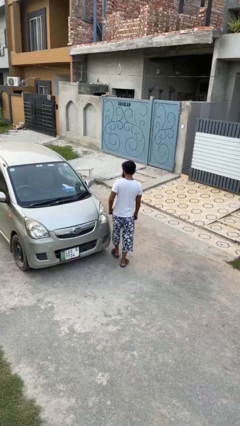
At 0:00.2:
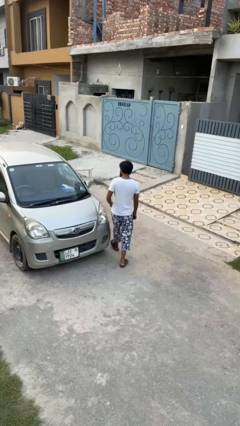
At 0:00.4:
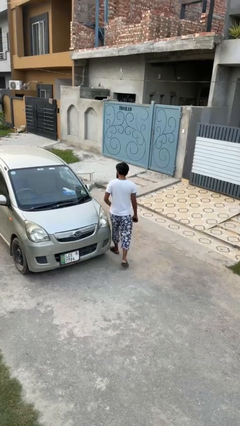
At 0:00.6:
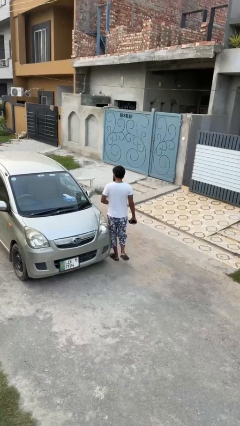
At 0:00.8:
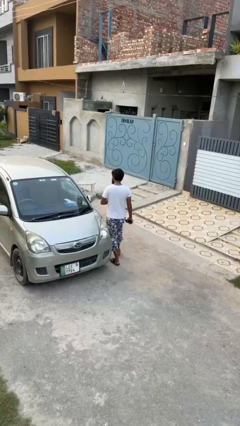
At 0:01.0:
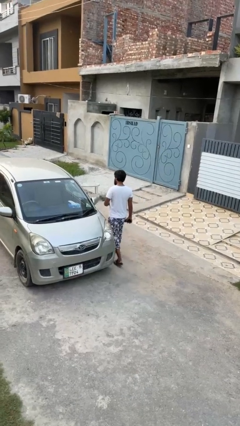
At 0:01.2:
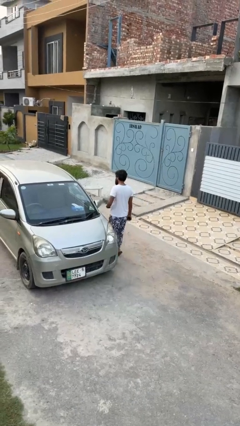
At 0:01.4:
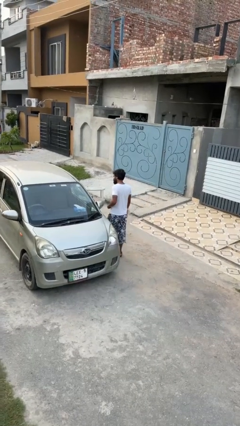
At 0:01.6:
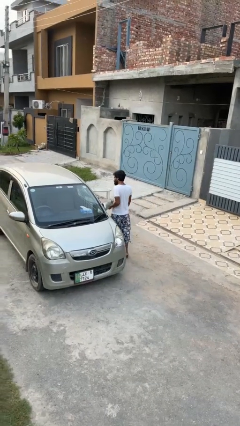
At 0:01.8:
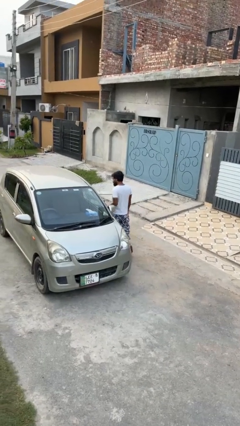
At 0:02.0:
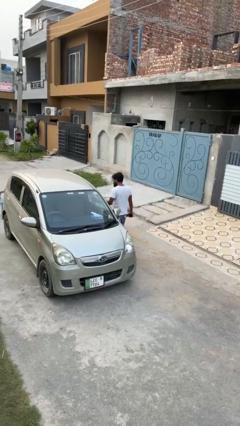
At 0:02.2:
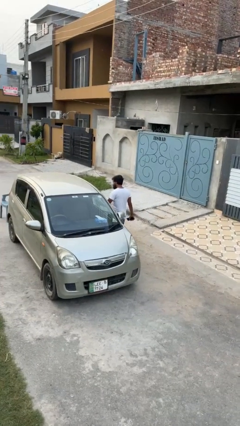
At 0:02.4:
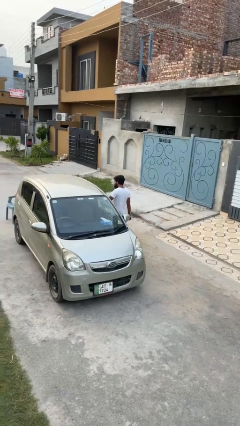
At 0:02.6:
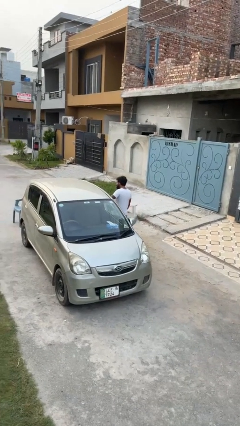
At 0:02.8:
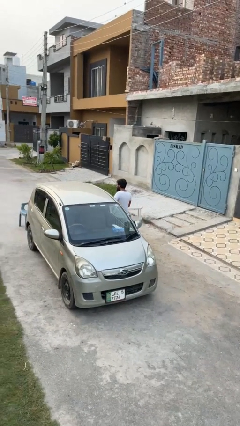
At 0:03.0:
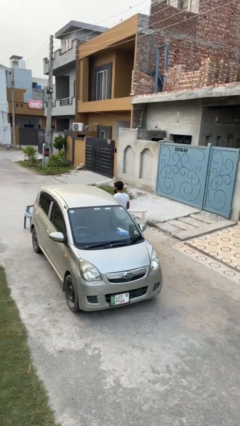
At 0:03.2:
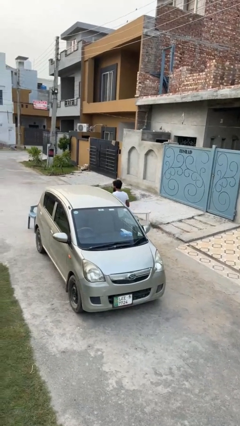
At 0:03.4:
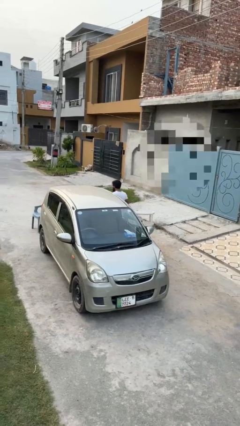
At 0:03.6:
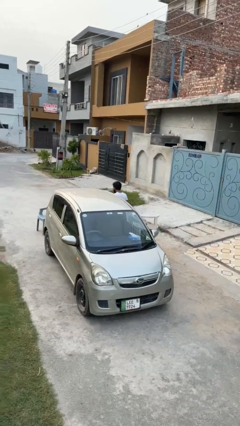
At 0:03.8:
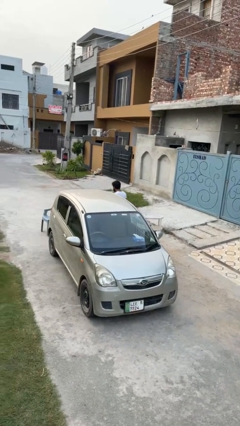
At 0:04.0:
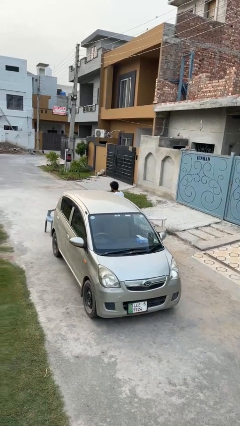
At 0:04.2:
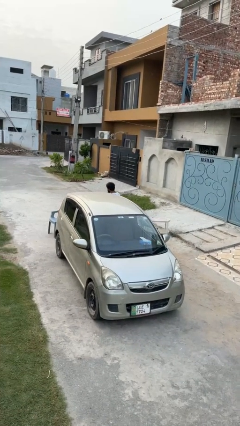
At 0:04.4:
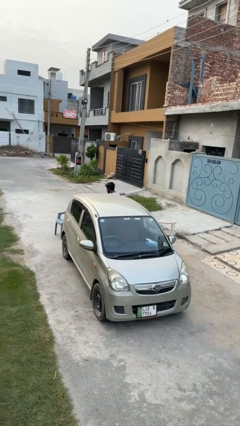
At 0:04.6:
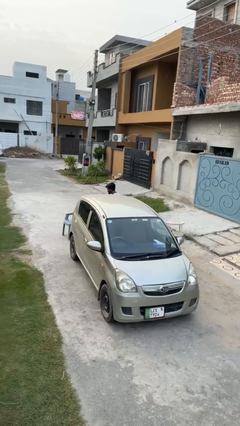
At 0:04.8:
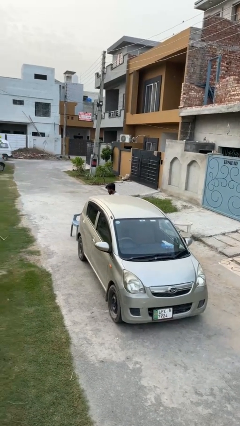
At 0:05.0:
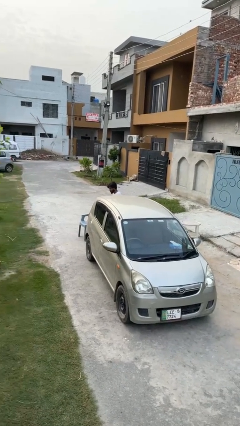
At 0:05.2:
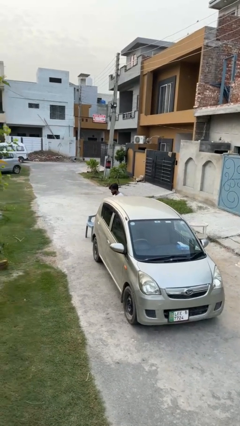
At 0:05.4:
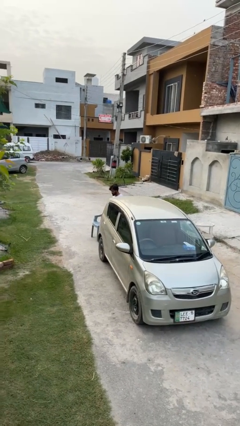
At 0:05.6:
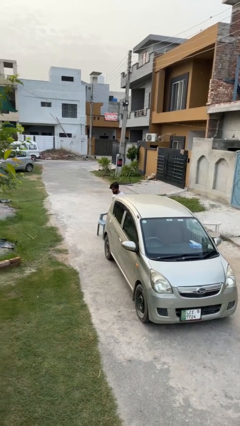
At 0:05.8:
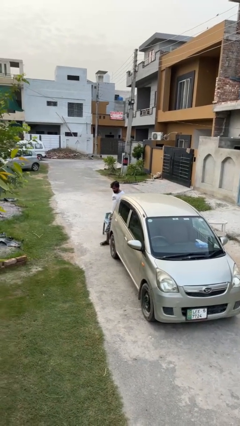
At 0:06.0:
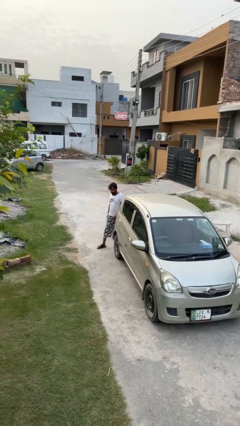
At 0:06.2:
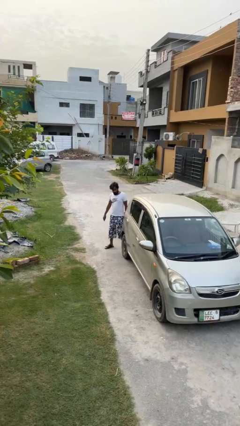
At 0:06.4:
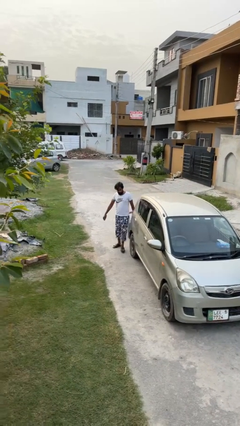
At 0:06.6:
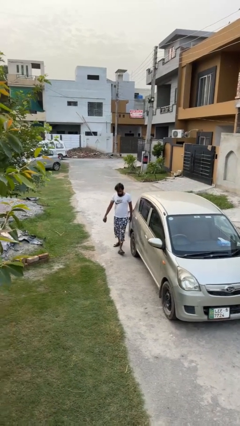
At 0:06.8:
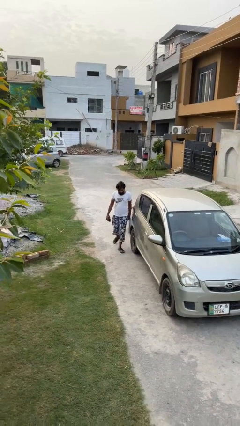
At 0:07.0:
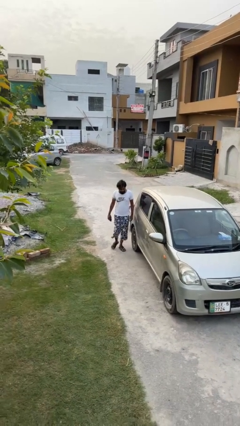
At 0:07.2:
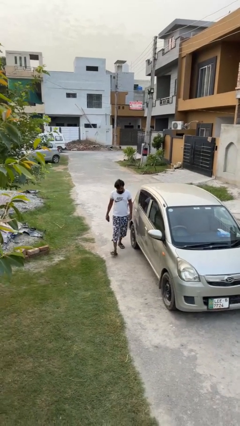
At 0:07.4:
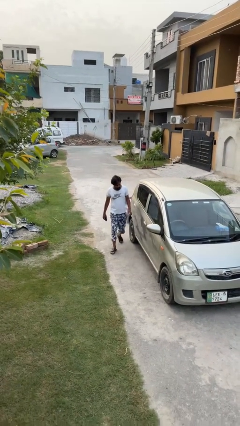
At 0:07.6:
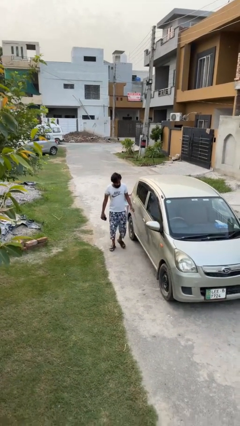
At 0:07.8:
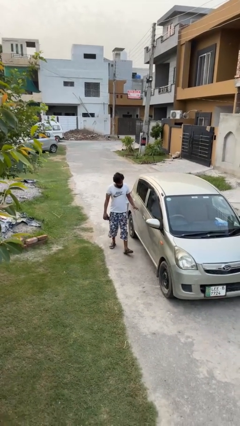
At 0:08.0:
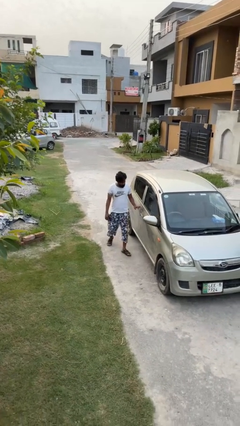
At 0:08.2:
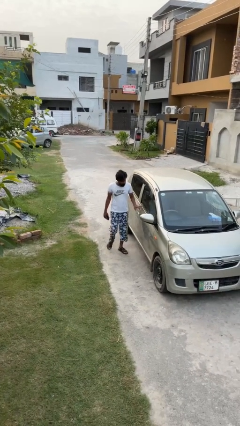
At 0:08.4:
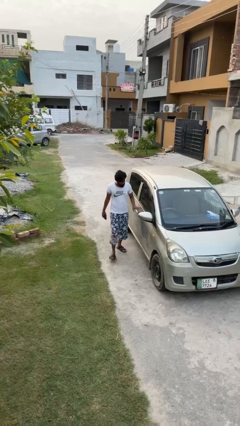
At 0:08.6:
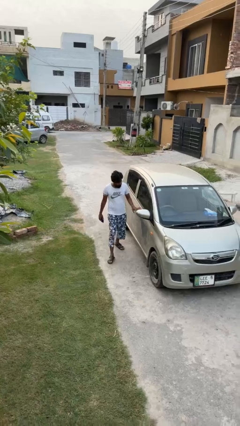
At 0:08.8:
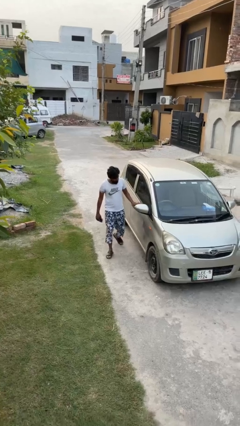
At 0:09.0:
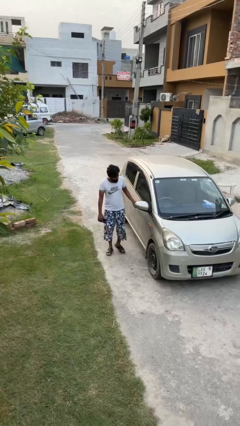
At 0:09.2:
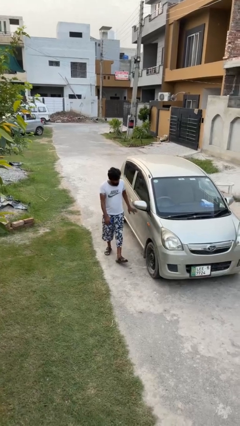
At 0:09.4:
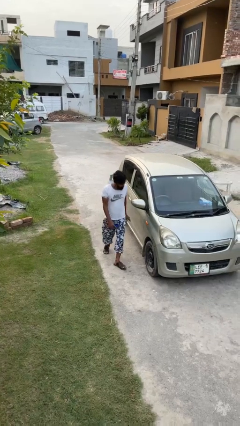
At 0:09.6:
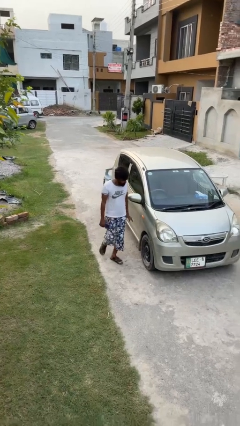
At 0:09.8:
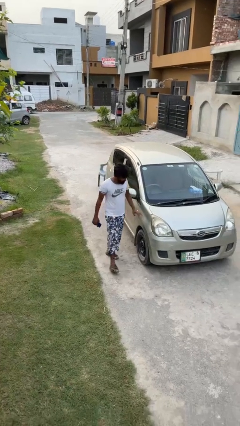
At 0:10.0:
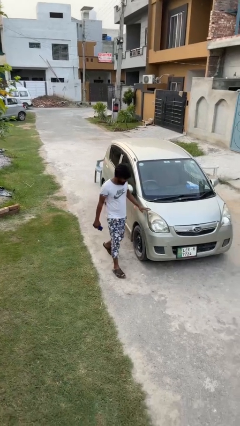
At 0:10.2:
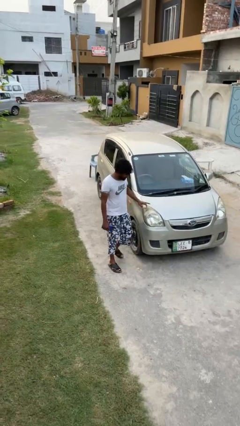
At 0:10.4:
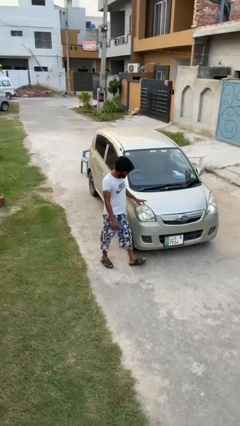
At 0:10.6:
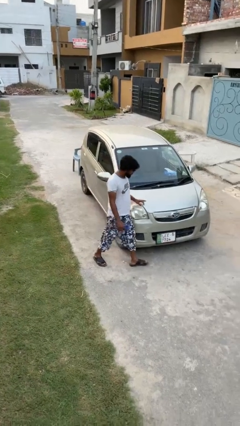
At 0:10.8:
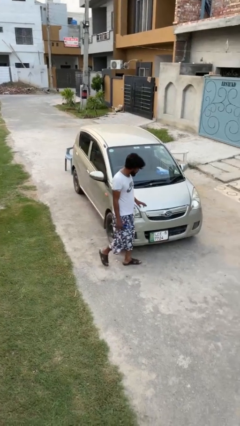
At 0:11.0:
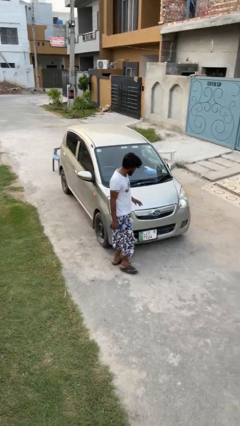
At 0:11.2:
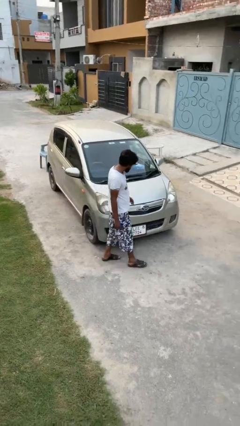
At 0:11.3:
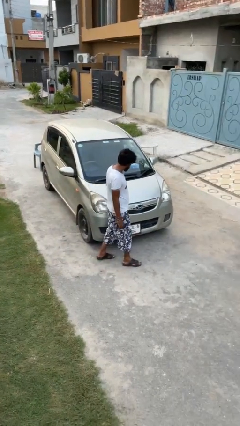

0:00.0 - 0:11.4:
person walks around car

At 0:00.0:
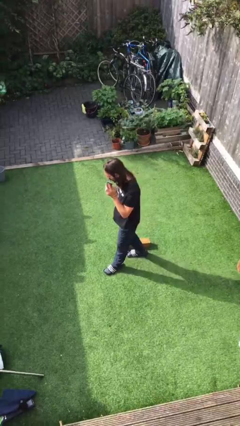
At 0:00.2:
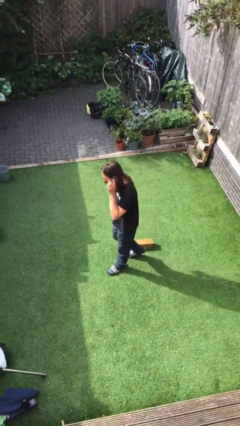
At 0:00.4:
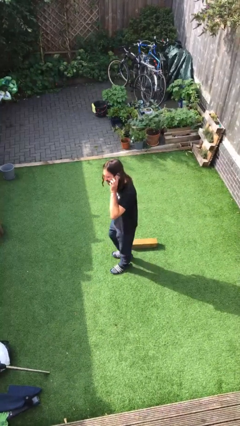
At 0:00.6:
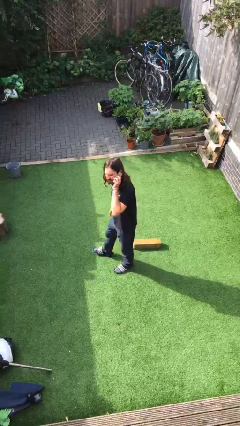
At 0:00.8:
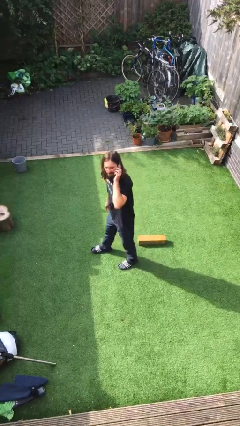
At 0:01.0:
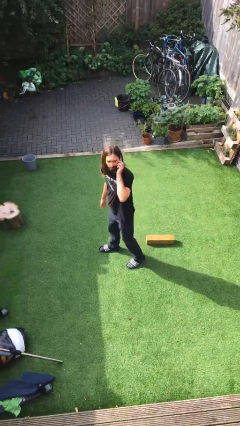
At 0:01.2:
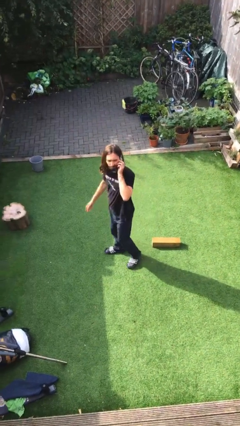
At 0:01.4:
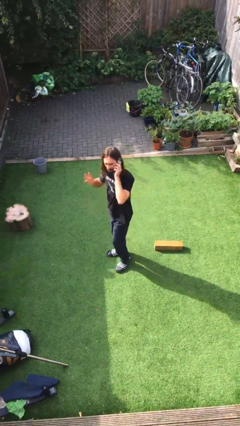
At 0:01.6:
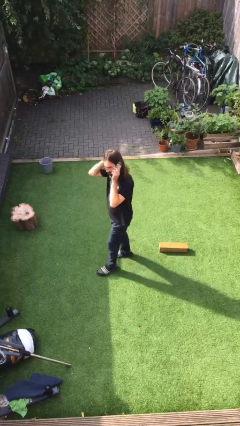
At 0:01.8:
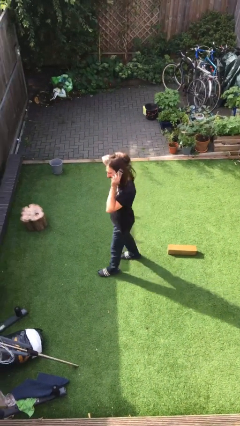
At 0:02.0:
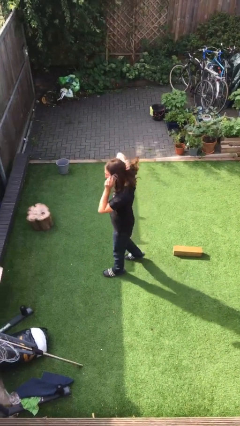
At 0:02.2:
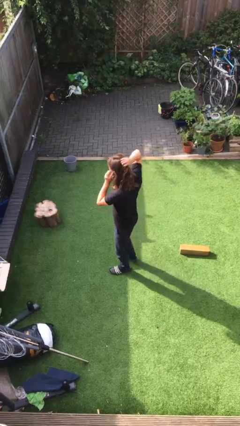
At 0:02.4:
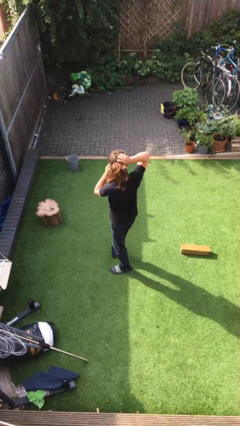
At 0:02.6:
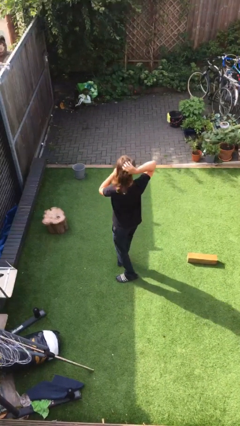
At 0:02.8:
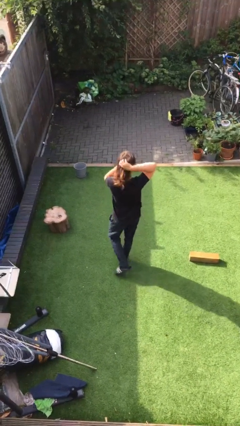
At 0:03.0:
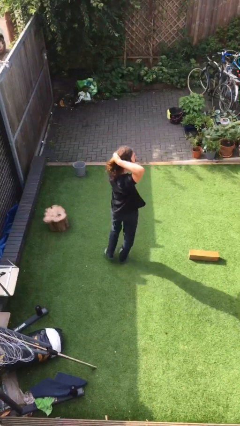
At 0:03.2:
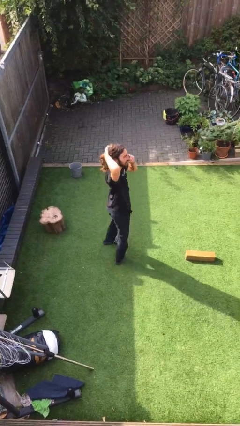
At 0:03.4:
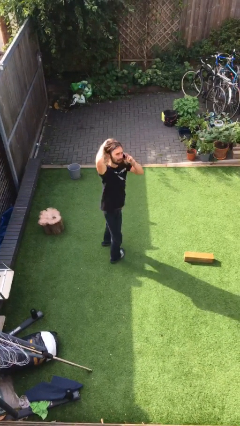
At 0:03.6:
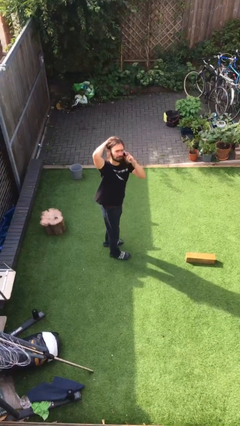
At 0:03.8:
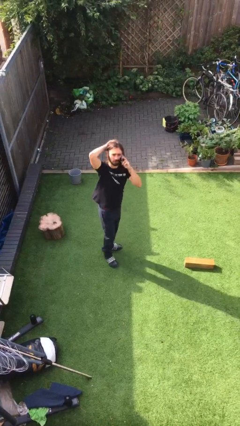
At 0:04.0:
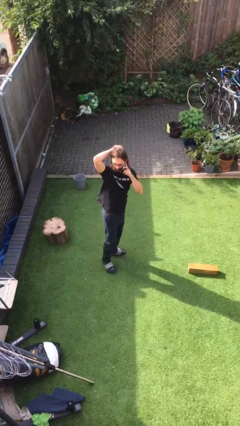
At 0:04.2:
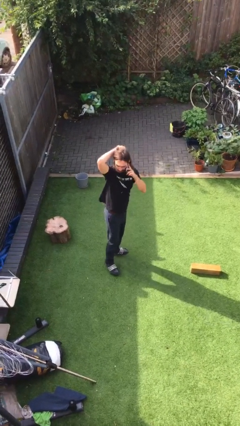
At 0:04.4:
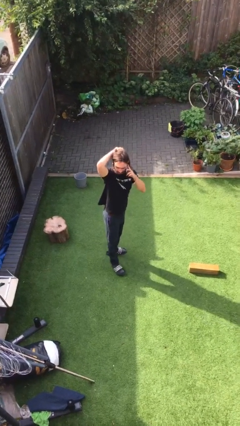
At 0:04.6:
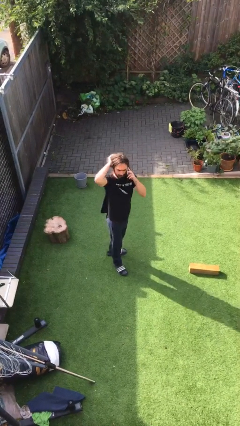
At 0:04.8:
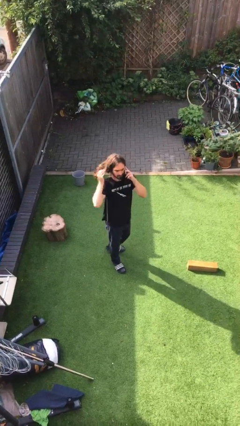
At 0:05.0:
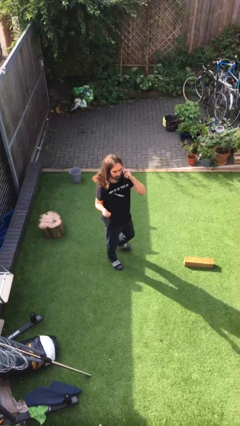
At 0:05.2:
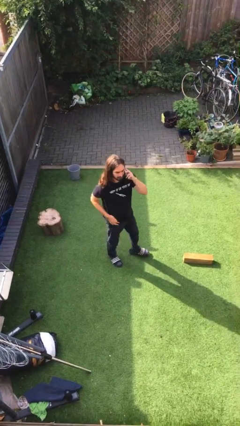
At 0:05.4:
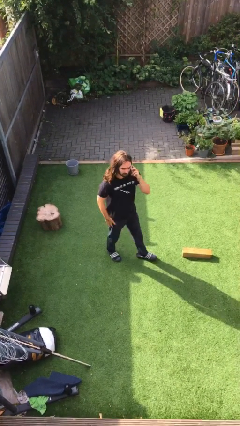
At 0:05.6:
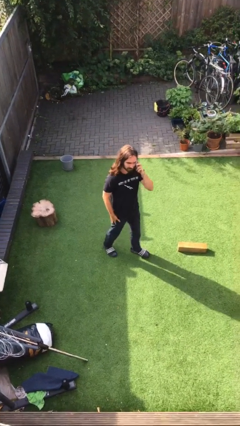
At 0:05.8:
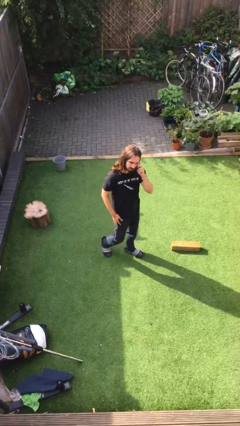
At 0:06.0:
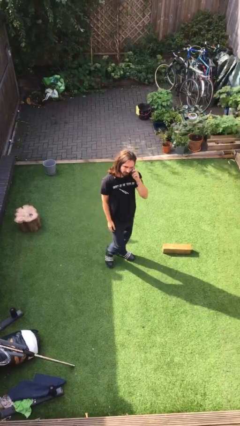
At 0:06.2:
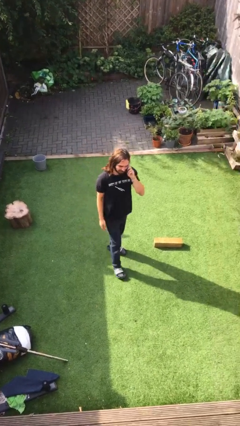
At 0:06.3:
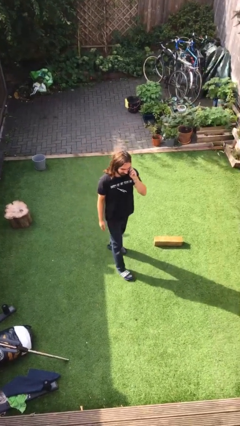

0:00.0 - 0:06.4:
person talks on phone
